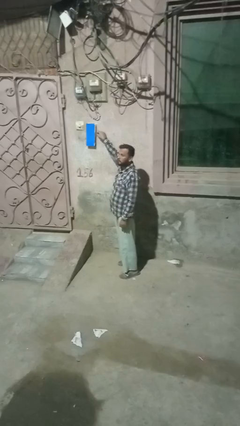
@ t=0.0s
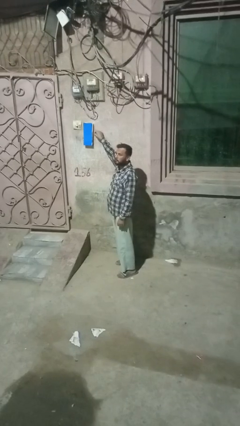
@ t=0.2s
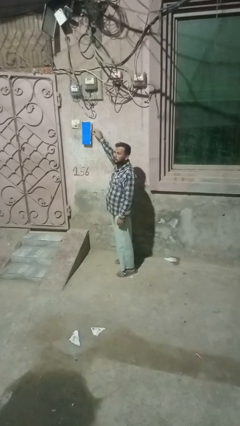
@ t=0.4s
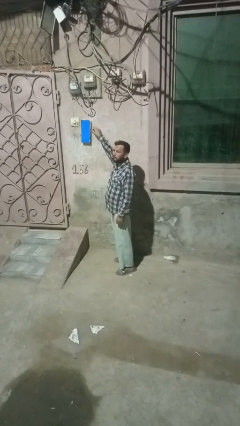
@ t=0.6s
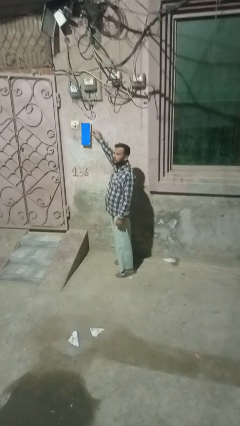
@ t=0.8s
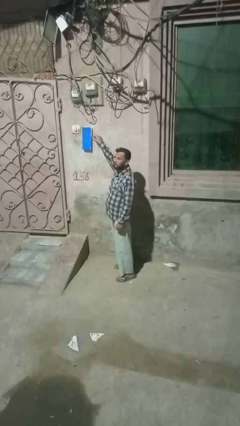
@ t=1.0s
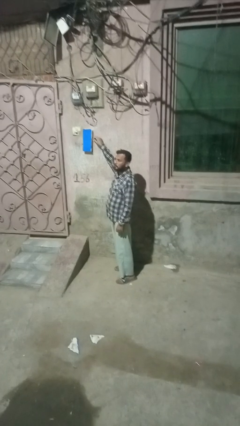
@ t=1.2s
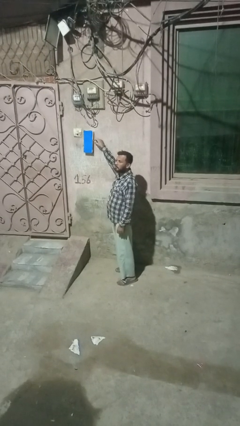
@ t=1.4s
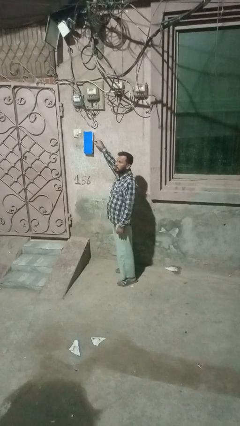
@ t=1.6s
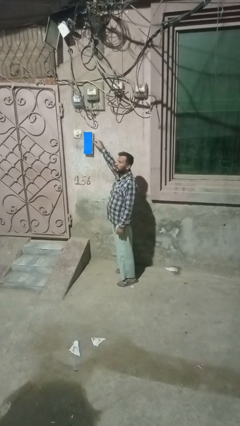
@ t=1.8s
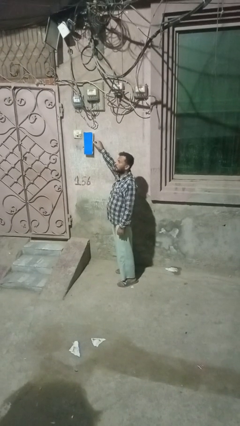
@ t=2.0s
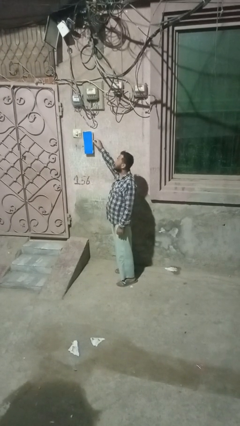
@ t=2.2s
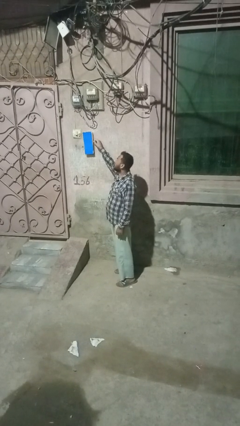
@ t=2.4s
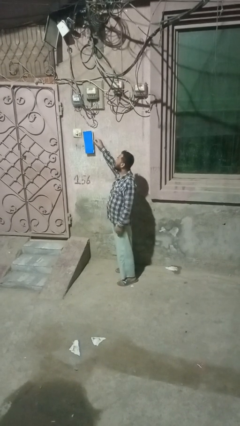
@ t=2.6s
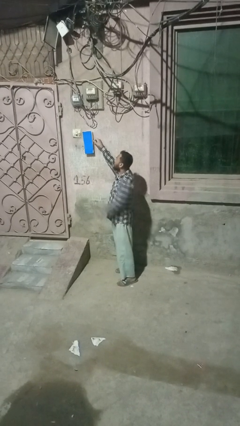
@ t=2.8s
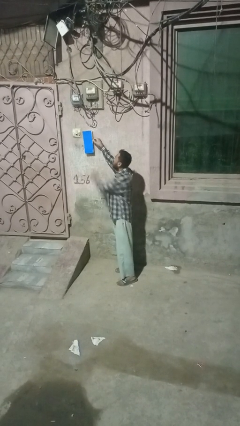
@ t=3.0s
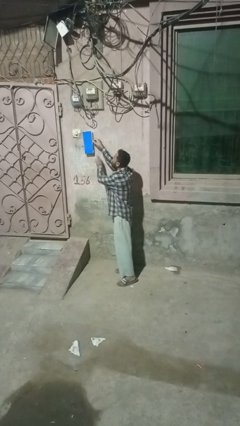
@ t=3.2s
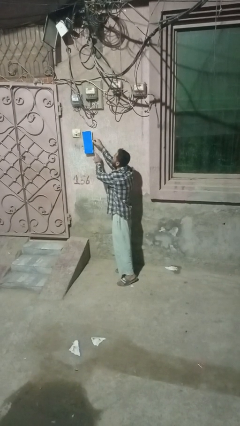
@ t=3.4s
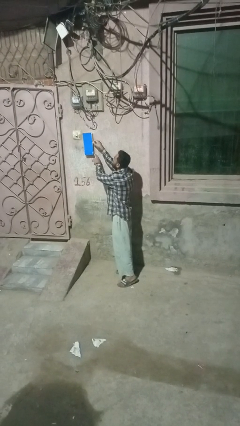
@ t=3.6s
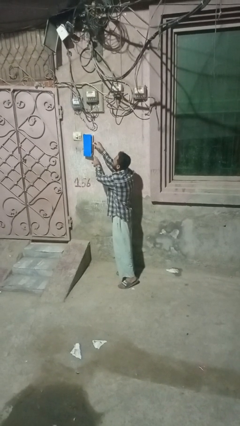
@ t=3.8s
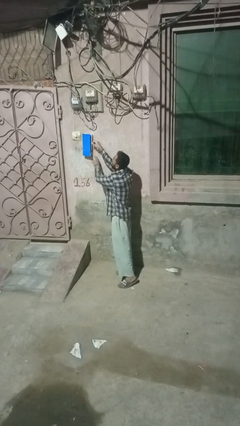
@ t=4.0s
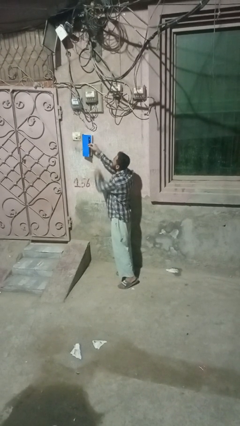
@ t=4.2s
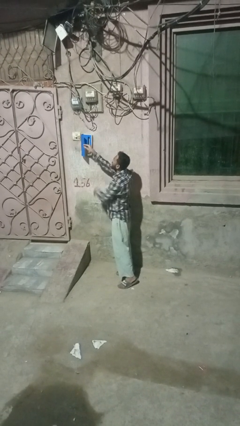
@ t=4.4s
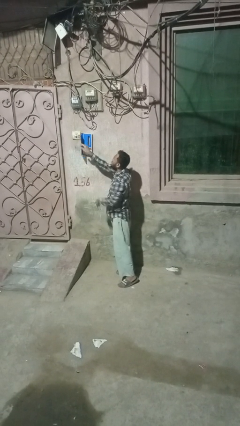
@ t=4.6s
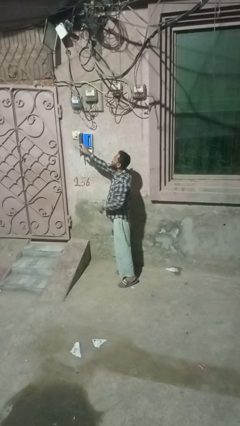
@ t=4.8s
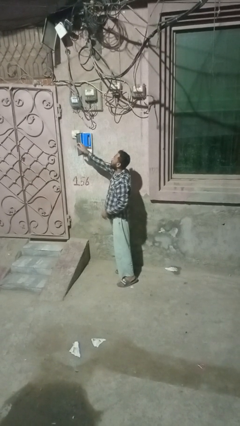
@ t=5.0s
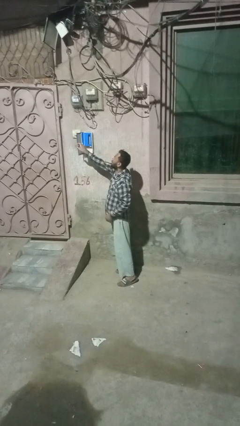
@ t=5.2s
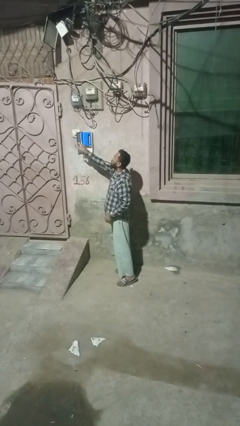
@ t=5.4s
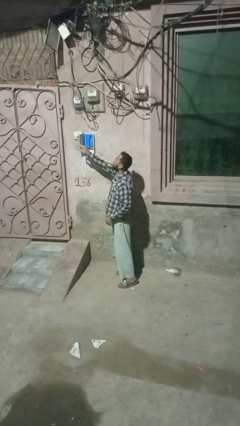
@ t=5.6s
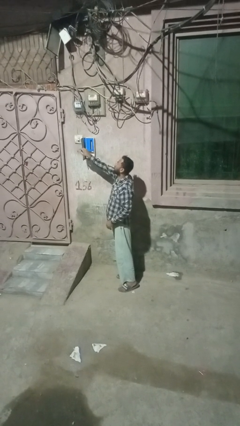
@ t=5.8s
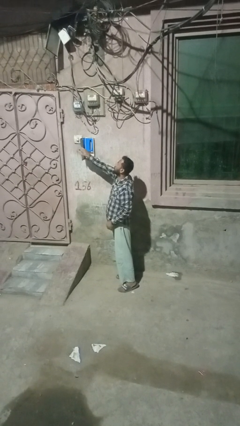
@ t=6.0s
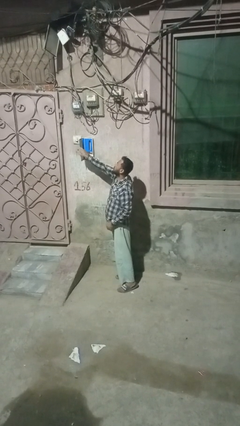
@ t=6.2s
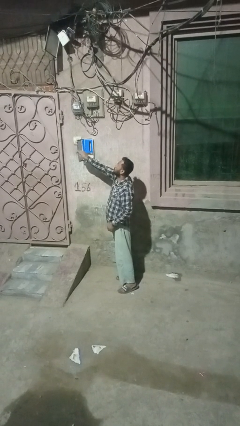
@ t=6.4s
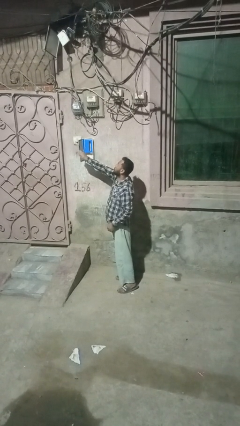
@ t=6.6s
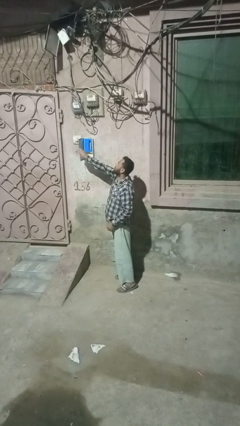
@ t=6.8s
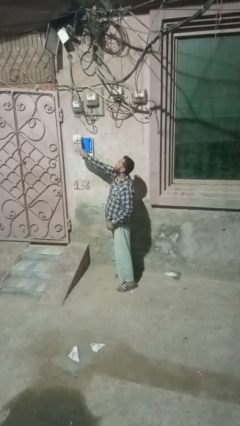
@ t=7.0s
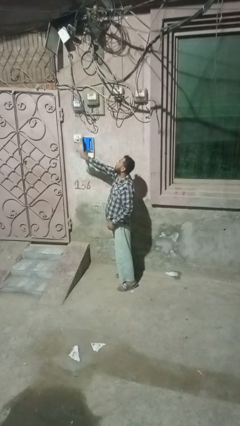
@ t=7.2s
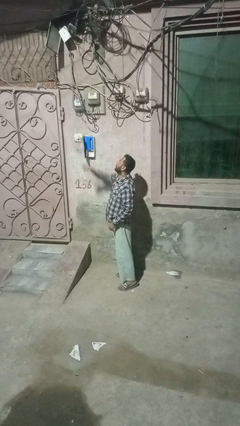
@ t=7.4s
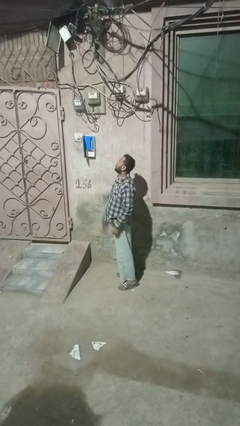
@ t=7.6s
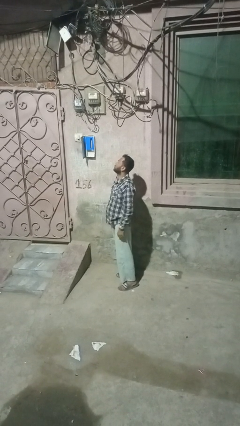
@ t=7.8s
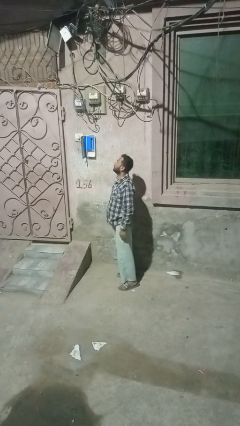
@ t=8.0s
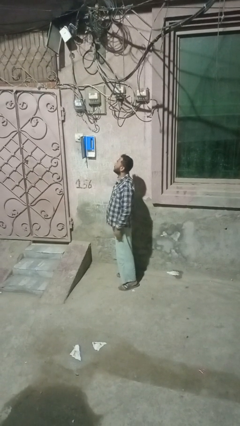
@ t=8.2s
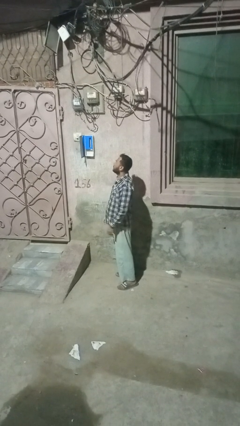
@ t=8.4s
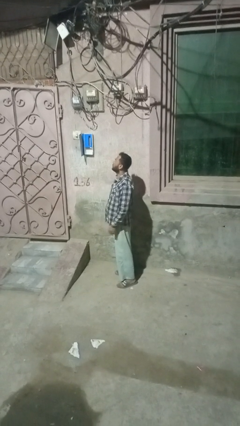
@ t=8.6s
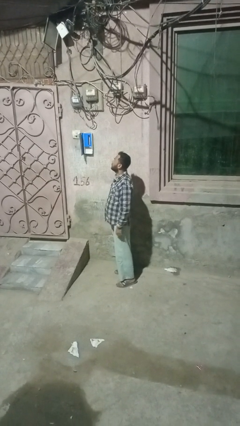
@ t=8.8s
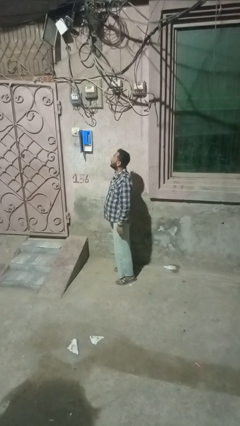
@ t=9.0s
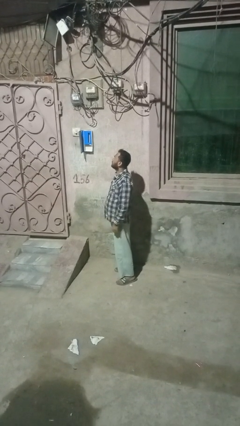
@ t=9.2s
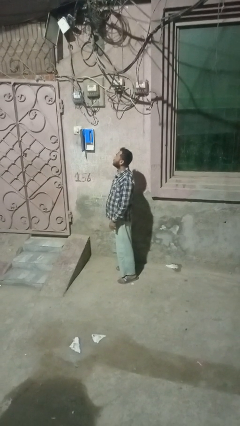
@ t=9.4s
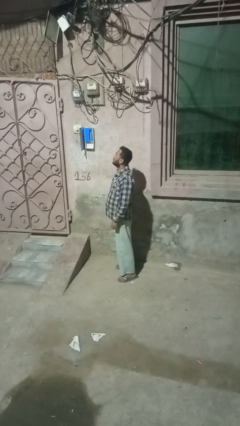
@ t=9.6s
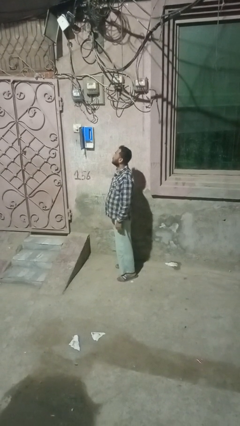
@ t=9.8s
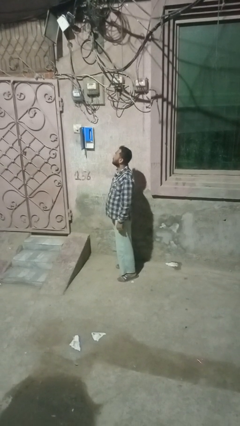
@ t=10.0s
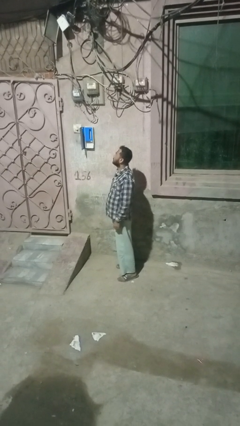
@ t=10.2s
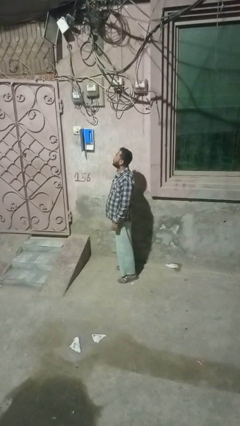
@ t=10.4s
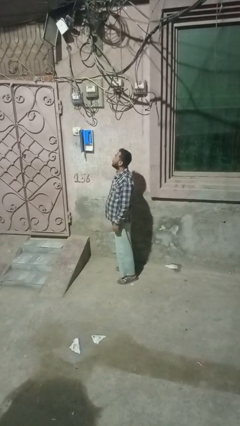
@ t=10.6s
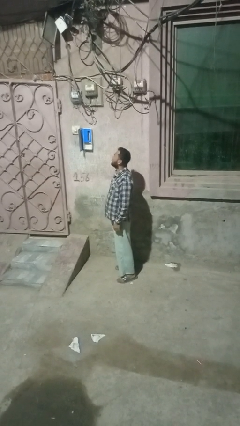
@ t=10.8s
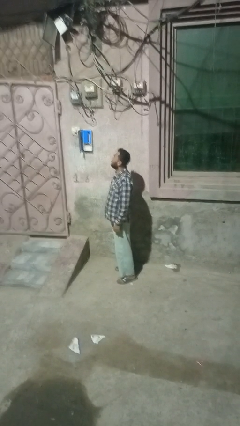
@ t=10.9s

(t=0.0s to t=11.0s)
person opens mailbox

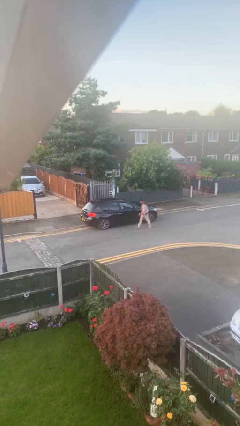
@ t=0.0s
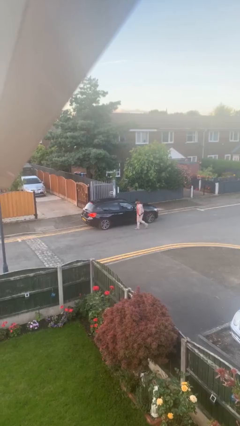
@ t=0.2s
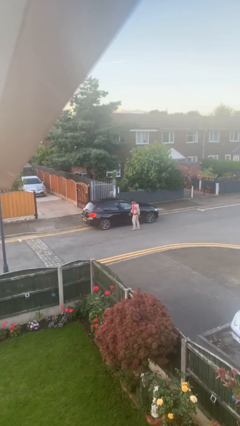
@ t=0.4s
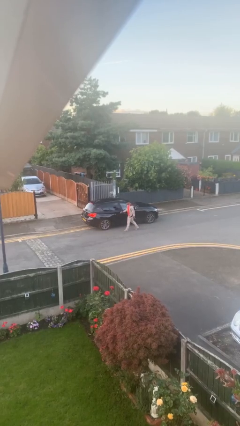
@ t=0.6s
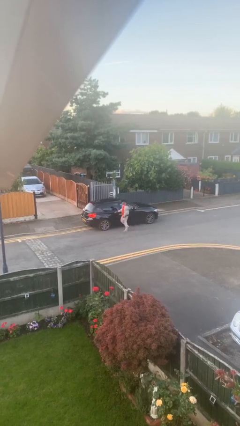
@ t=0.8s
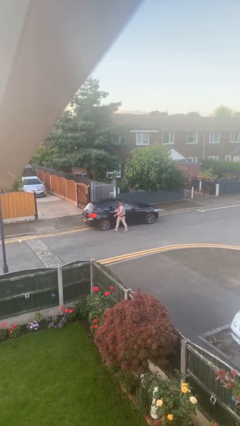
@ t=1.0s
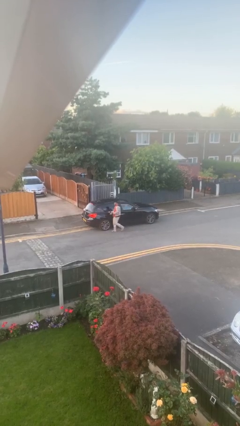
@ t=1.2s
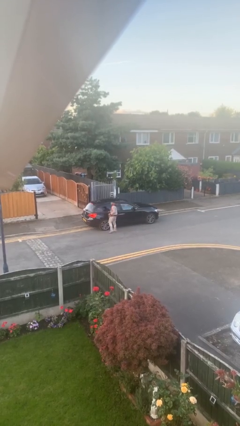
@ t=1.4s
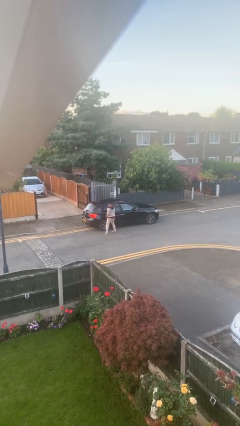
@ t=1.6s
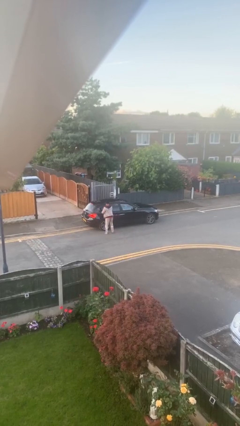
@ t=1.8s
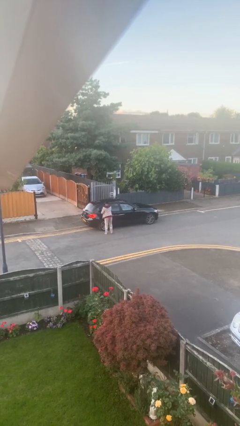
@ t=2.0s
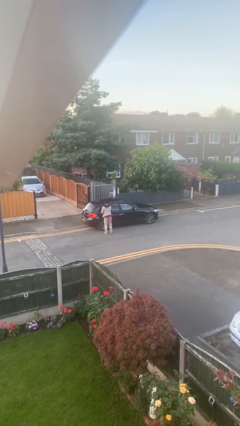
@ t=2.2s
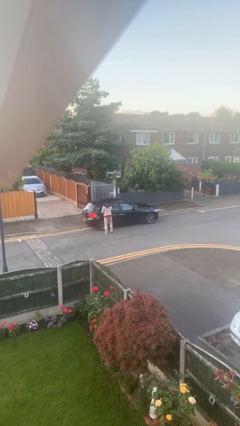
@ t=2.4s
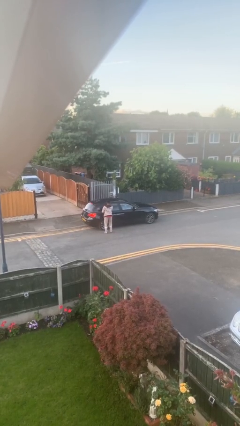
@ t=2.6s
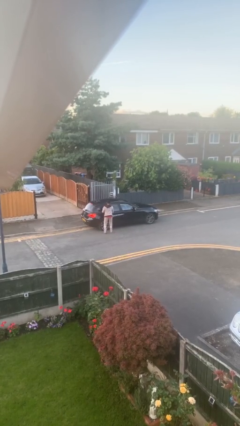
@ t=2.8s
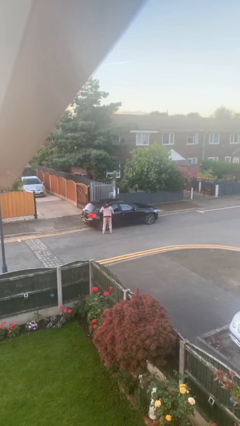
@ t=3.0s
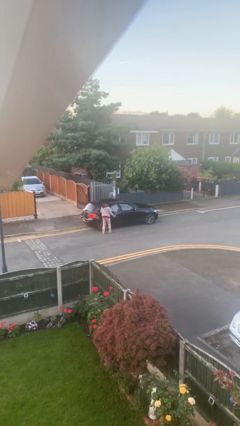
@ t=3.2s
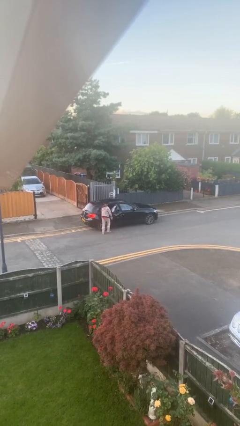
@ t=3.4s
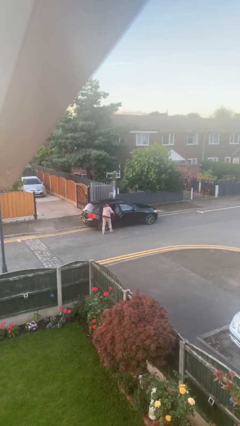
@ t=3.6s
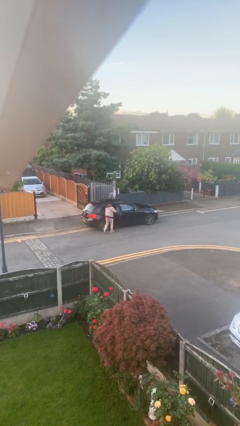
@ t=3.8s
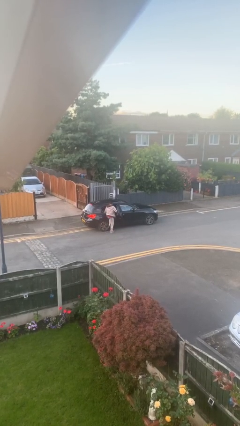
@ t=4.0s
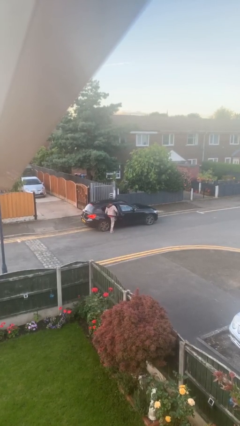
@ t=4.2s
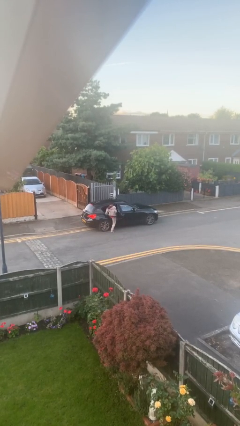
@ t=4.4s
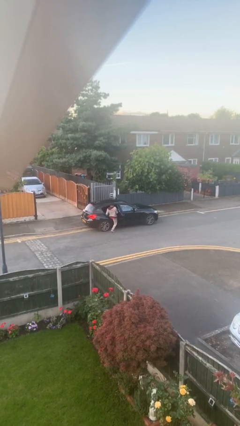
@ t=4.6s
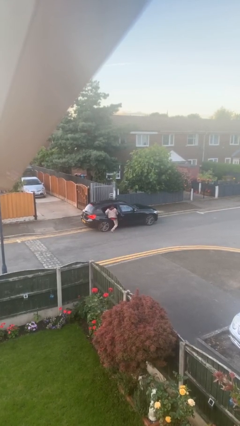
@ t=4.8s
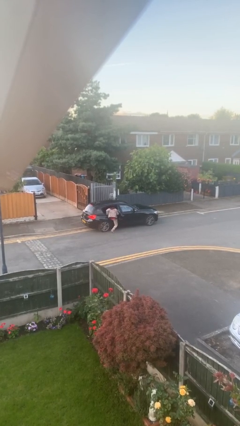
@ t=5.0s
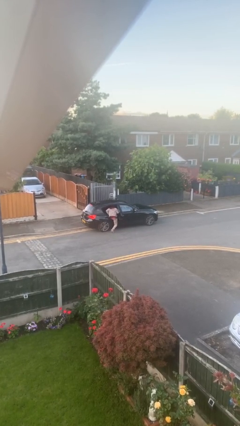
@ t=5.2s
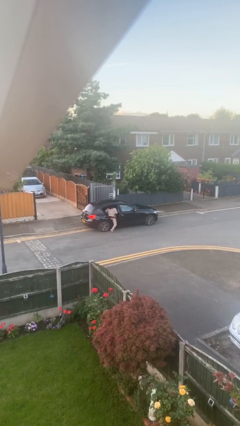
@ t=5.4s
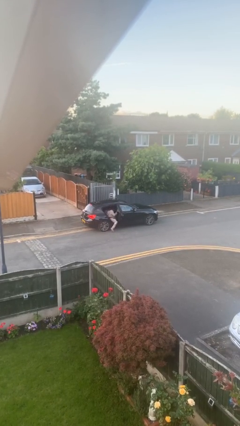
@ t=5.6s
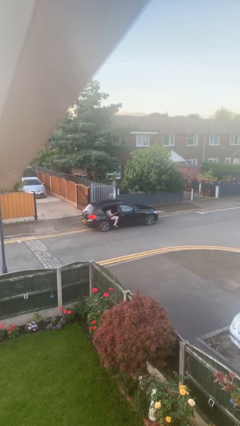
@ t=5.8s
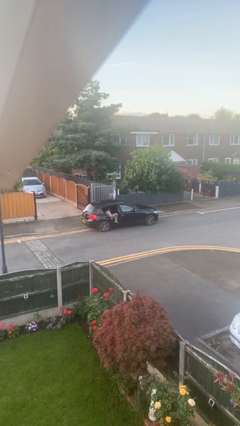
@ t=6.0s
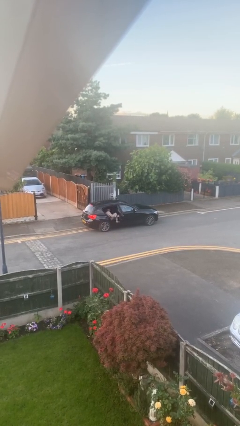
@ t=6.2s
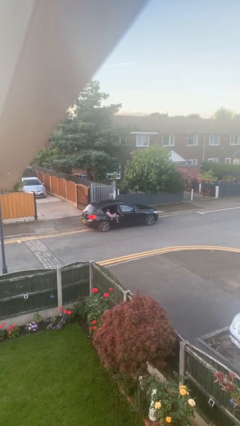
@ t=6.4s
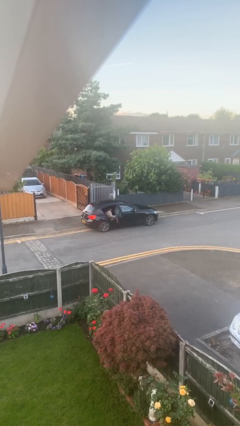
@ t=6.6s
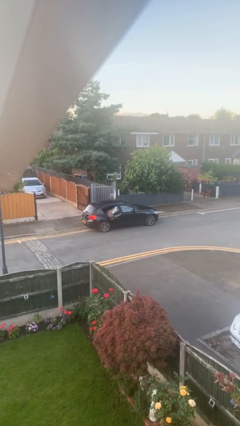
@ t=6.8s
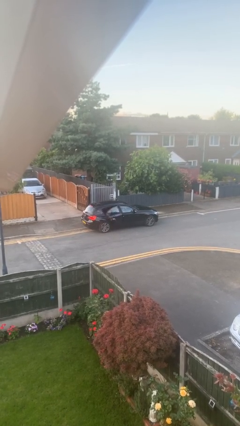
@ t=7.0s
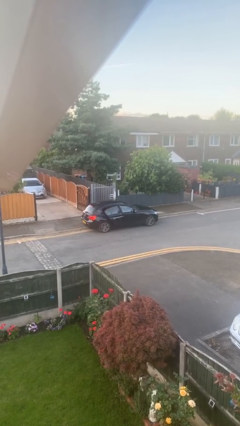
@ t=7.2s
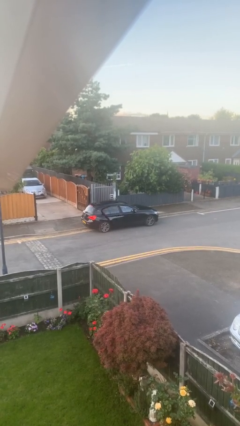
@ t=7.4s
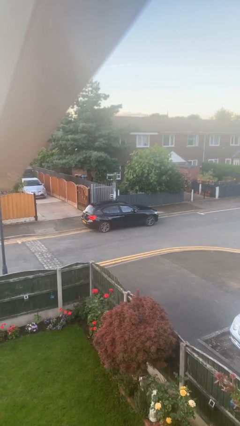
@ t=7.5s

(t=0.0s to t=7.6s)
car picks up person
